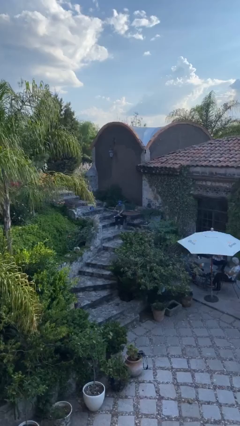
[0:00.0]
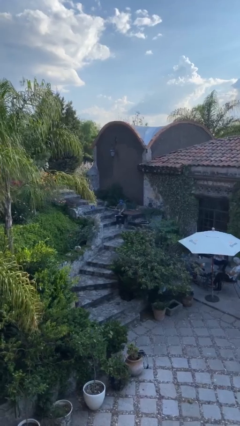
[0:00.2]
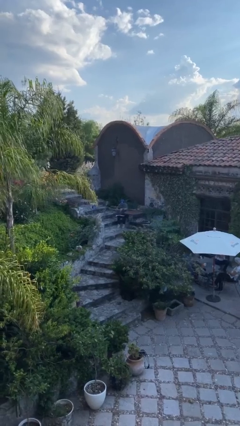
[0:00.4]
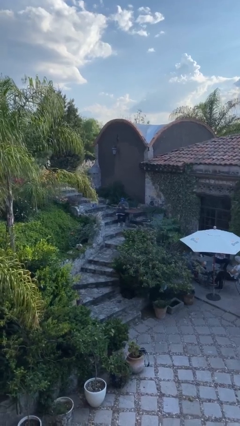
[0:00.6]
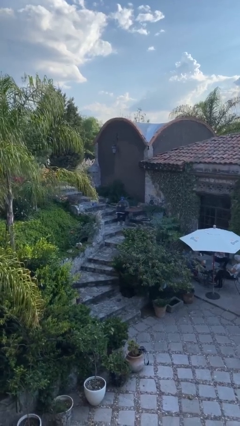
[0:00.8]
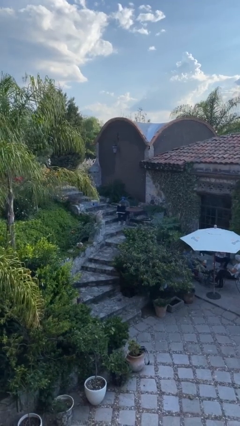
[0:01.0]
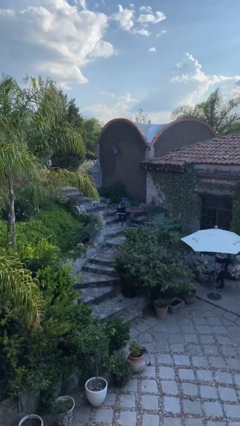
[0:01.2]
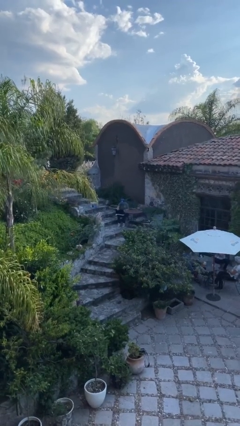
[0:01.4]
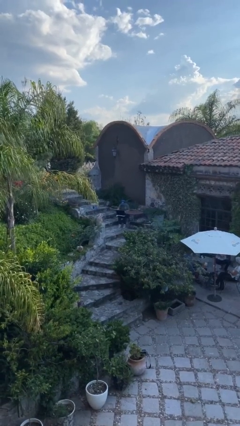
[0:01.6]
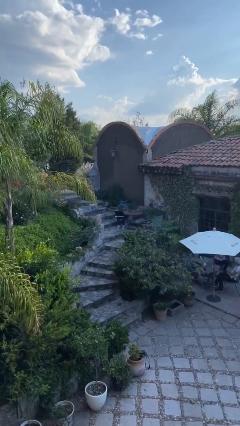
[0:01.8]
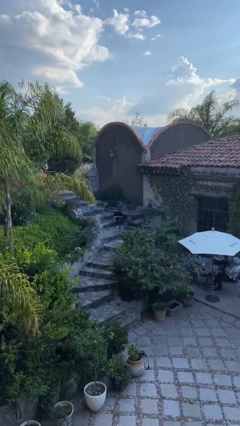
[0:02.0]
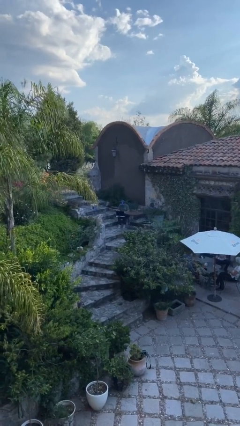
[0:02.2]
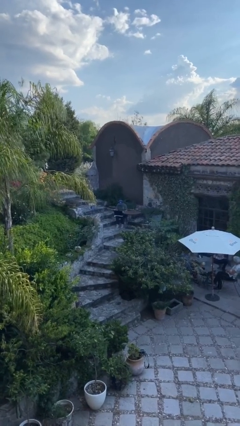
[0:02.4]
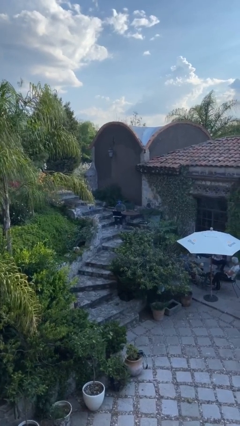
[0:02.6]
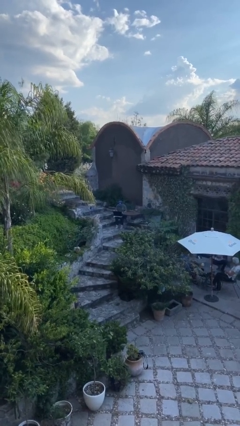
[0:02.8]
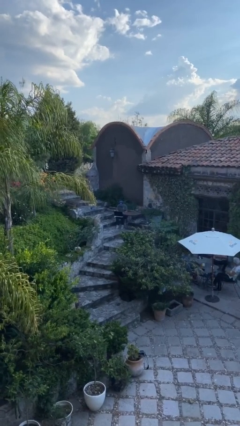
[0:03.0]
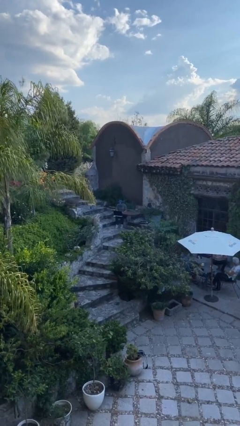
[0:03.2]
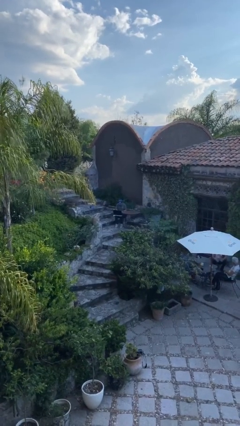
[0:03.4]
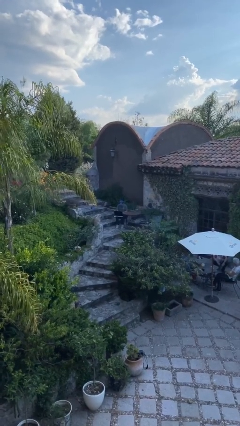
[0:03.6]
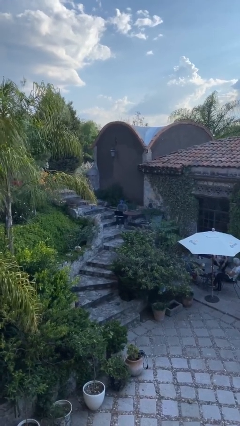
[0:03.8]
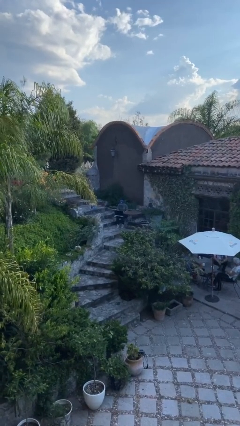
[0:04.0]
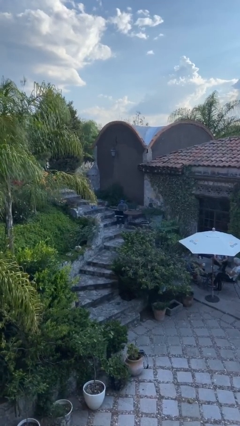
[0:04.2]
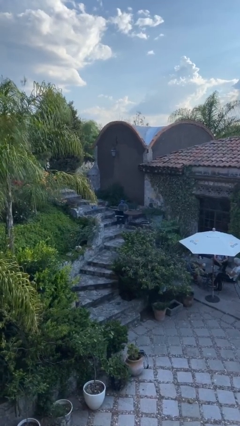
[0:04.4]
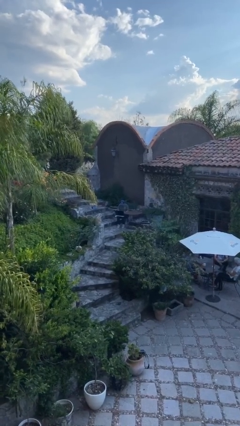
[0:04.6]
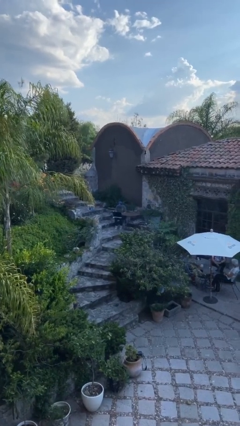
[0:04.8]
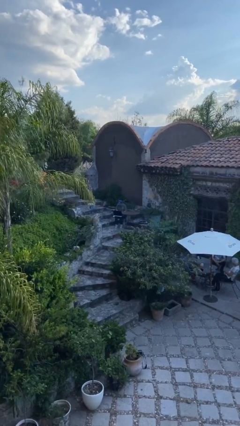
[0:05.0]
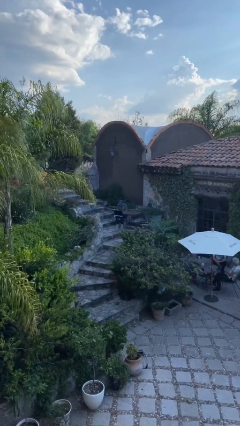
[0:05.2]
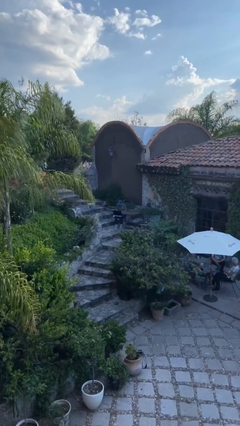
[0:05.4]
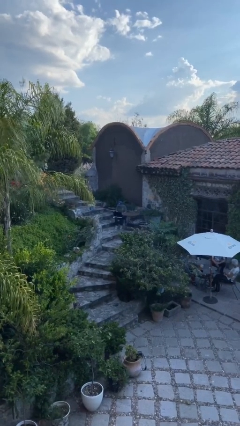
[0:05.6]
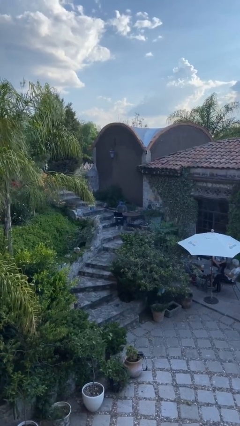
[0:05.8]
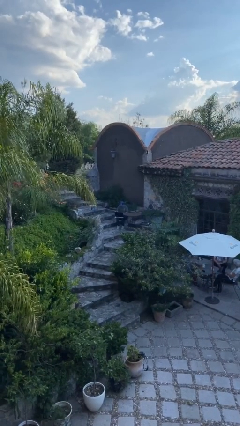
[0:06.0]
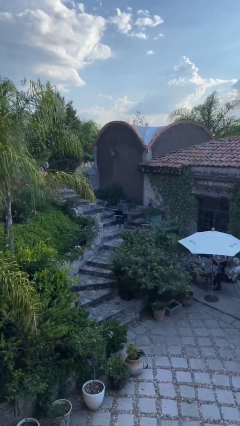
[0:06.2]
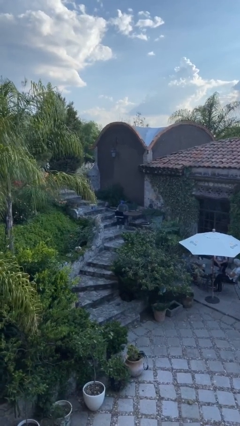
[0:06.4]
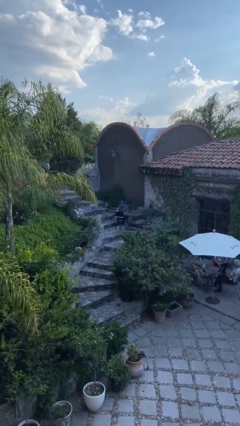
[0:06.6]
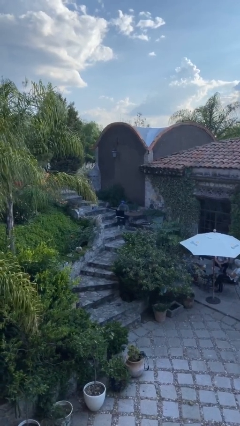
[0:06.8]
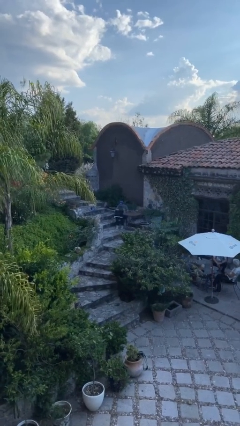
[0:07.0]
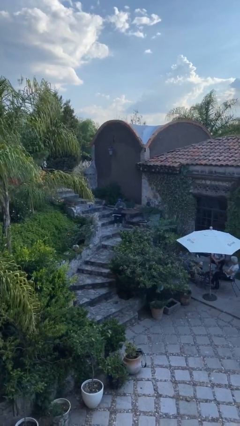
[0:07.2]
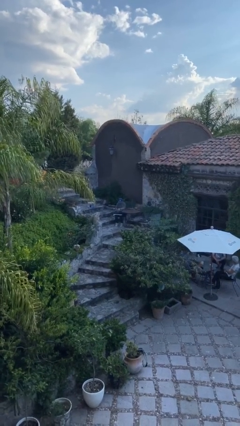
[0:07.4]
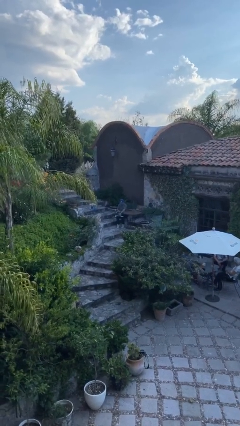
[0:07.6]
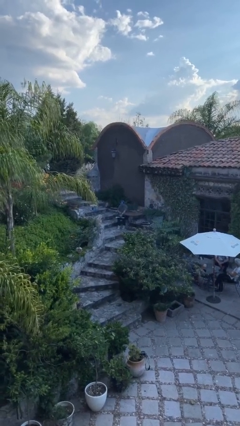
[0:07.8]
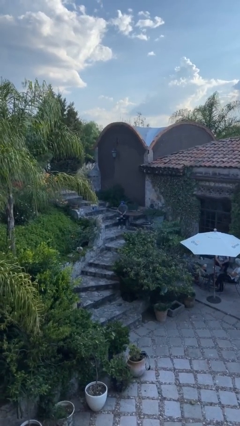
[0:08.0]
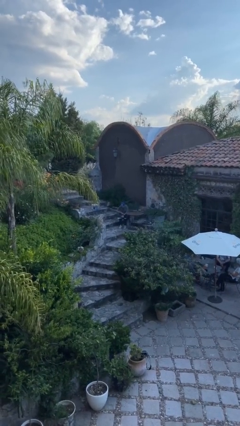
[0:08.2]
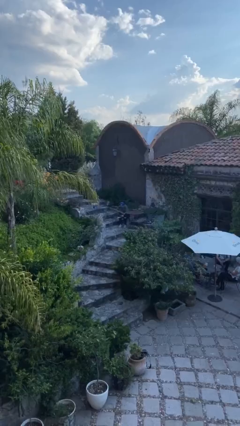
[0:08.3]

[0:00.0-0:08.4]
person interacts with laptop

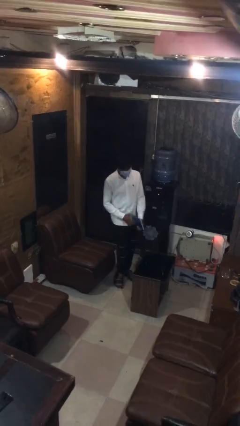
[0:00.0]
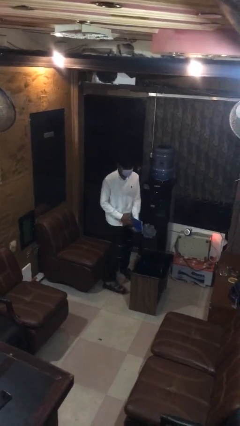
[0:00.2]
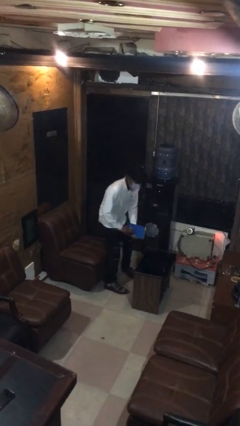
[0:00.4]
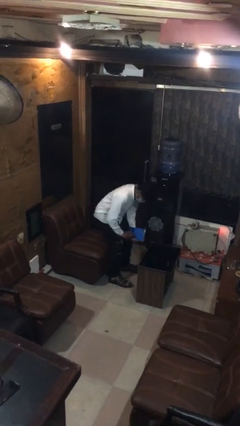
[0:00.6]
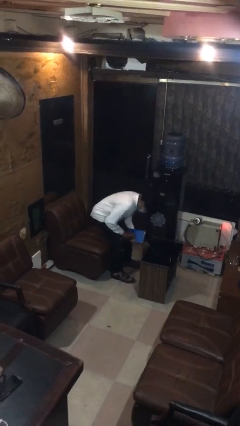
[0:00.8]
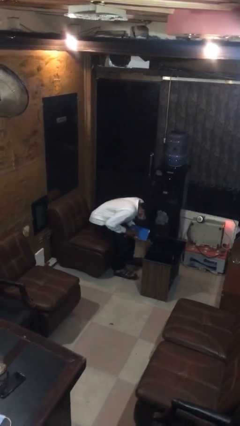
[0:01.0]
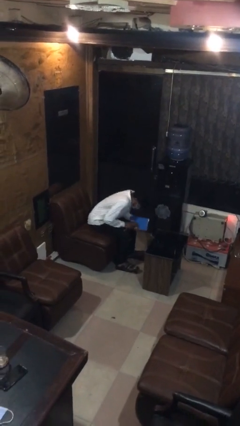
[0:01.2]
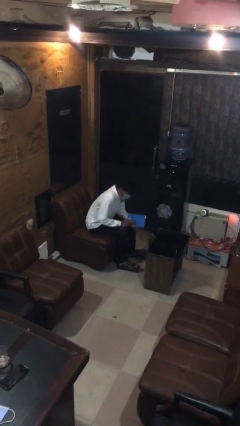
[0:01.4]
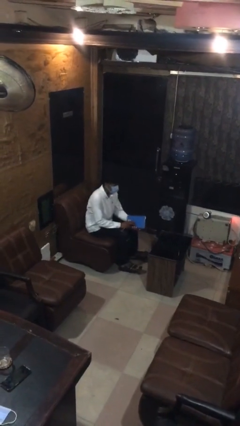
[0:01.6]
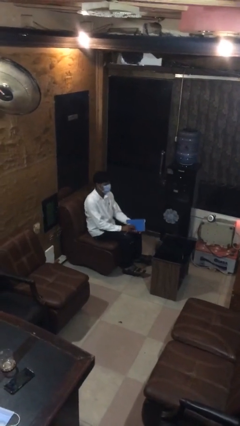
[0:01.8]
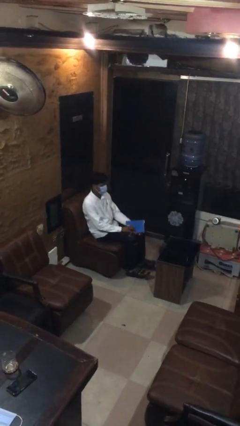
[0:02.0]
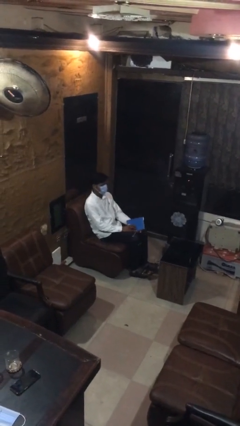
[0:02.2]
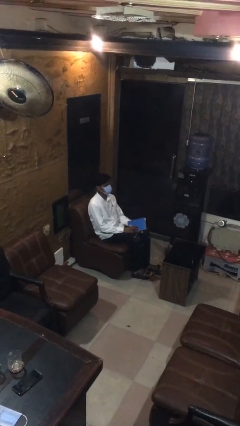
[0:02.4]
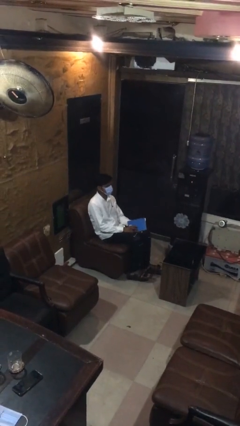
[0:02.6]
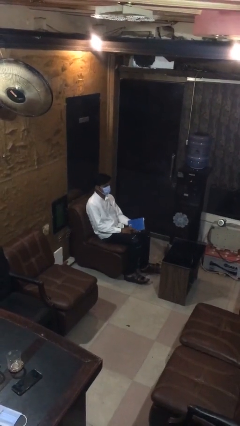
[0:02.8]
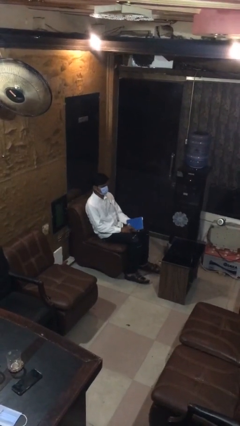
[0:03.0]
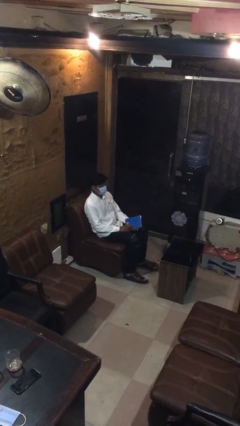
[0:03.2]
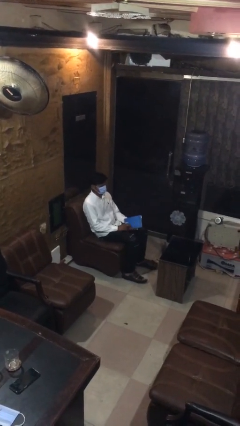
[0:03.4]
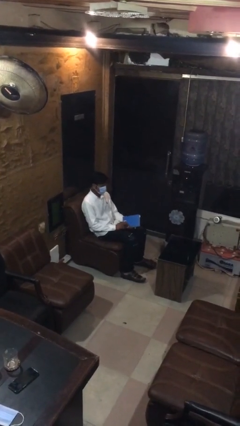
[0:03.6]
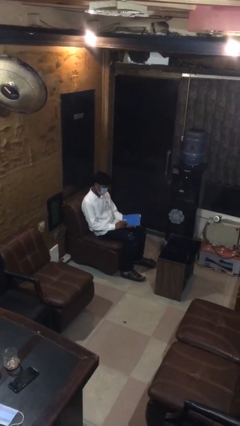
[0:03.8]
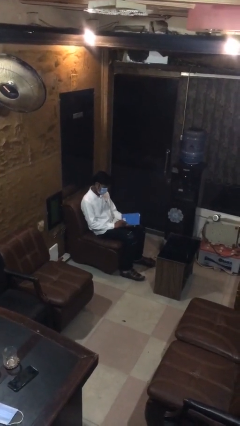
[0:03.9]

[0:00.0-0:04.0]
person sits down

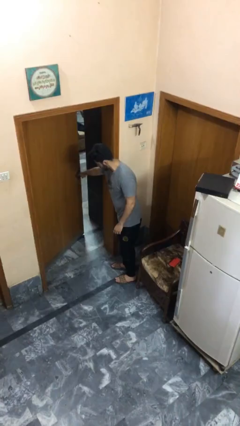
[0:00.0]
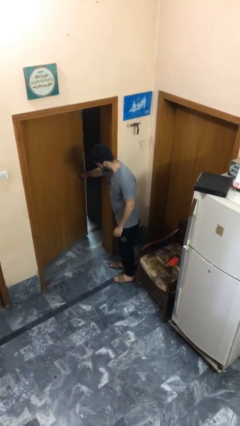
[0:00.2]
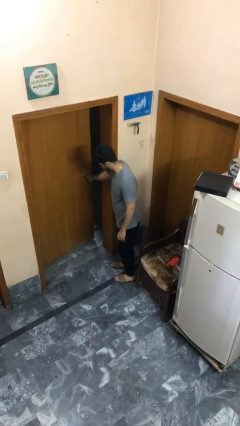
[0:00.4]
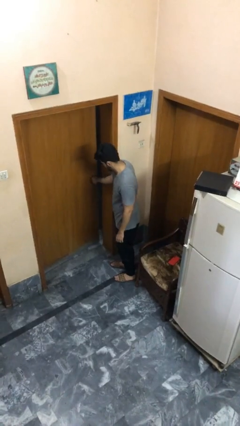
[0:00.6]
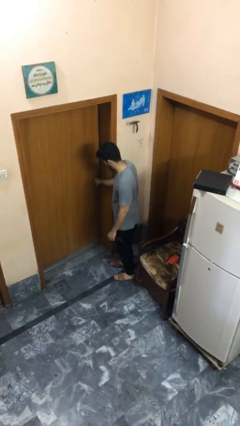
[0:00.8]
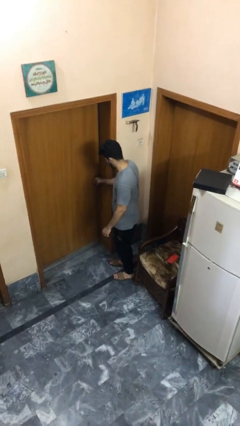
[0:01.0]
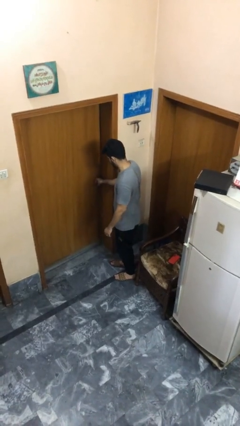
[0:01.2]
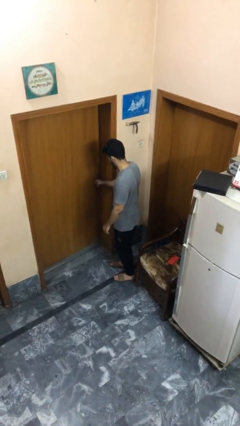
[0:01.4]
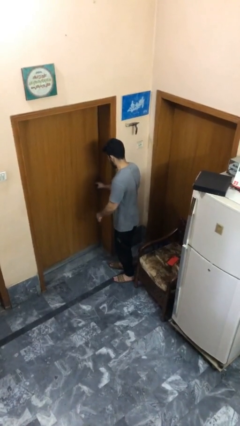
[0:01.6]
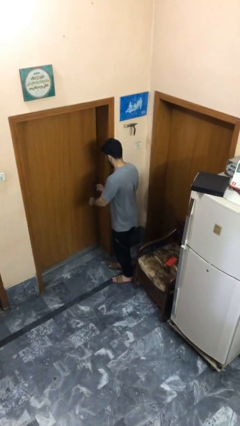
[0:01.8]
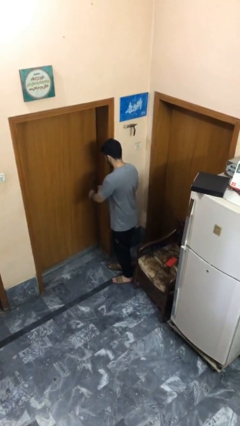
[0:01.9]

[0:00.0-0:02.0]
person closes facility door

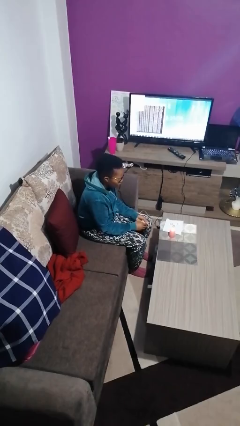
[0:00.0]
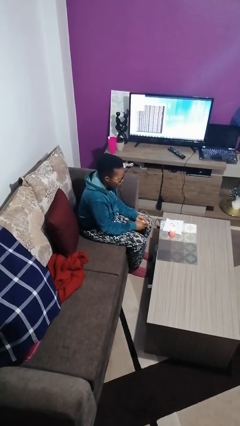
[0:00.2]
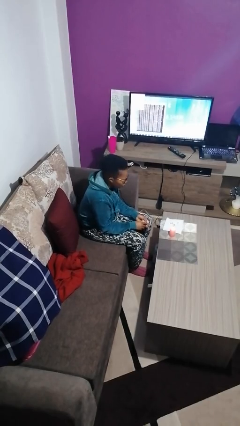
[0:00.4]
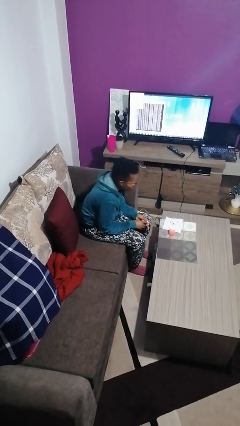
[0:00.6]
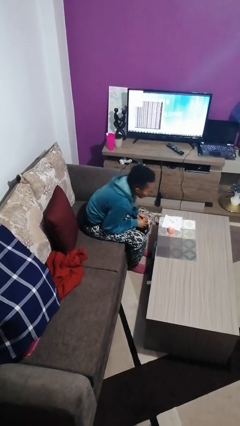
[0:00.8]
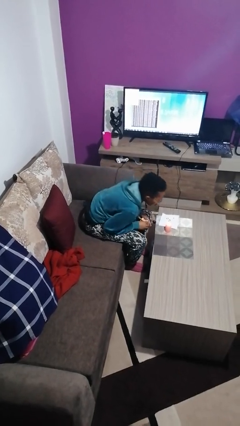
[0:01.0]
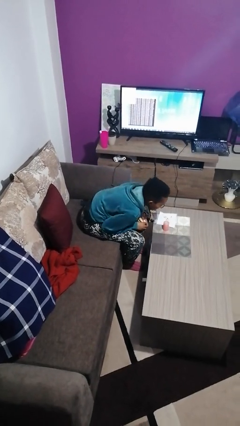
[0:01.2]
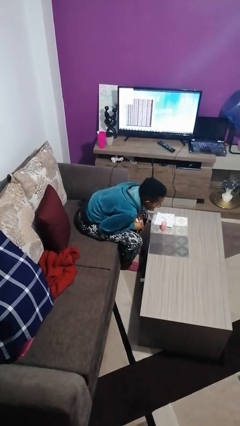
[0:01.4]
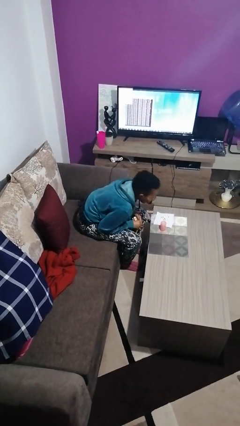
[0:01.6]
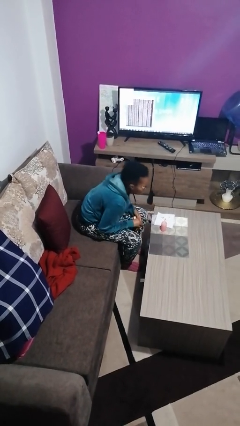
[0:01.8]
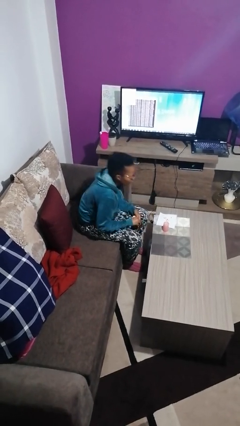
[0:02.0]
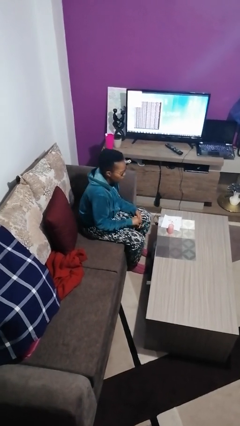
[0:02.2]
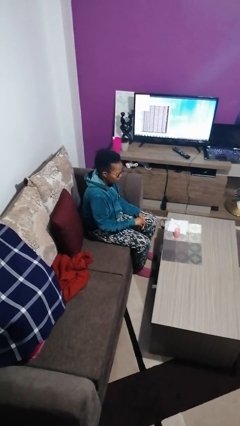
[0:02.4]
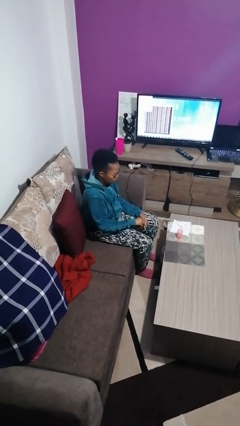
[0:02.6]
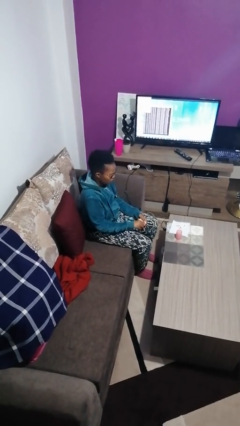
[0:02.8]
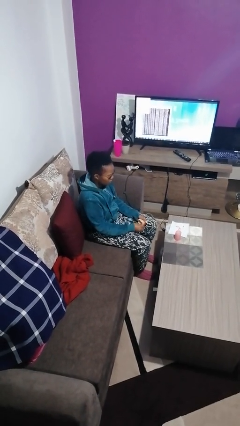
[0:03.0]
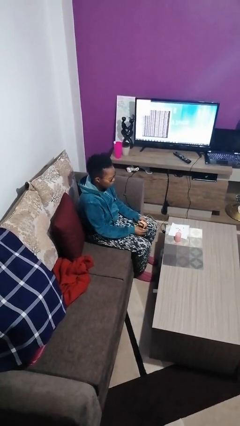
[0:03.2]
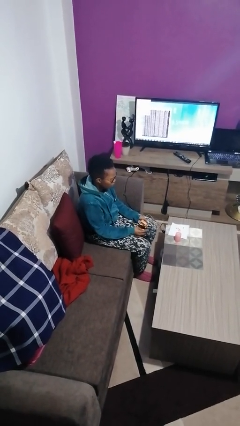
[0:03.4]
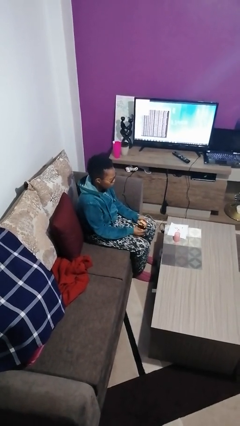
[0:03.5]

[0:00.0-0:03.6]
person extinguishes candle
